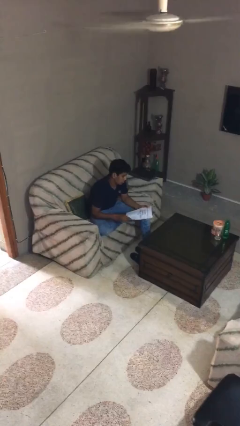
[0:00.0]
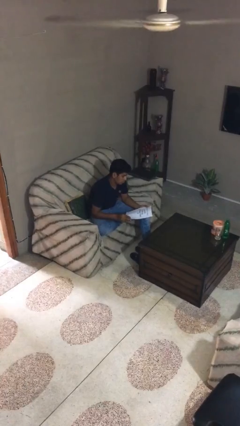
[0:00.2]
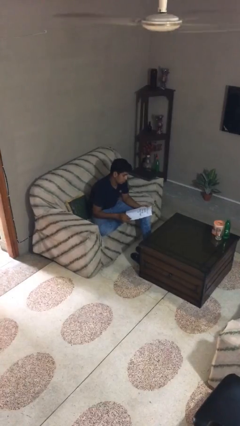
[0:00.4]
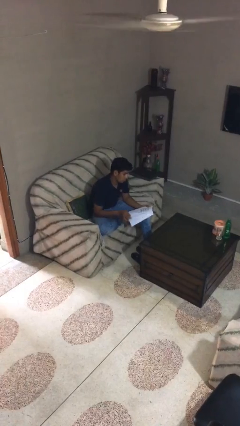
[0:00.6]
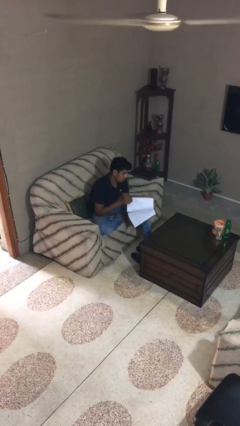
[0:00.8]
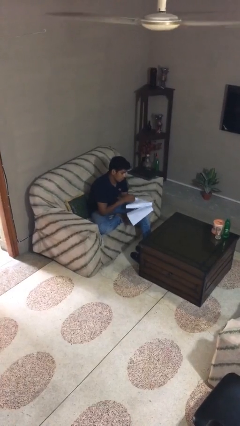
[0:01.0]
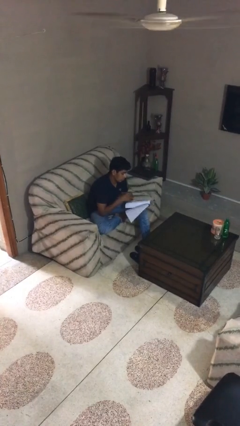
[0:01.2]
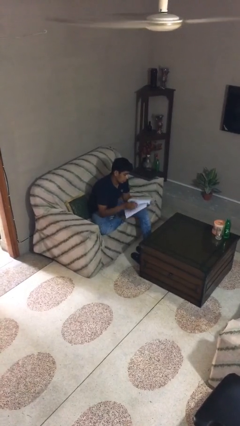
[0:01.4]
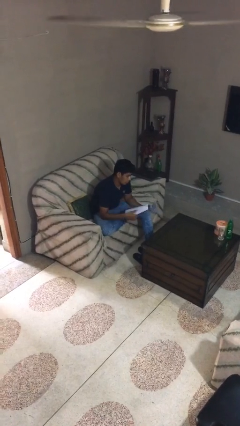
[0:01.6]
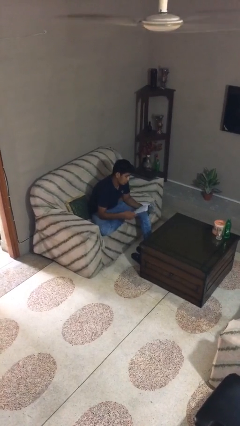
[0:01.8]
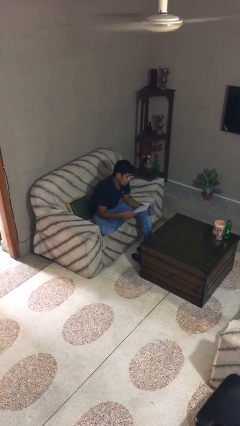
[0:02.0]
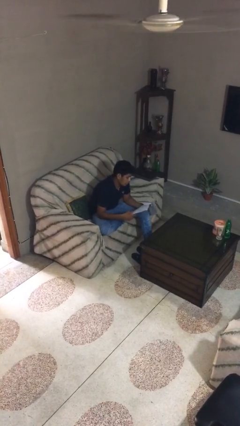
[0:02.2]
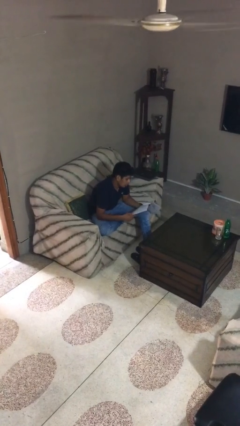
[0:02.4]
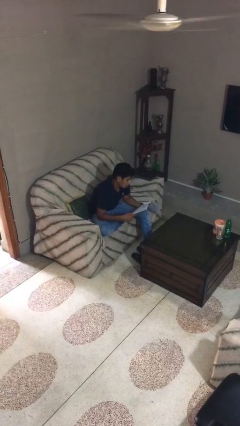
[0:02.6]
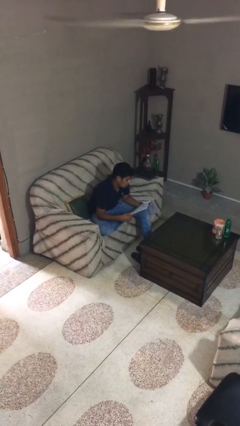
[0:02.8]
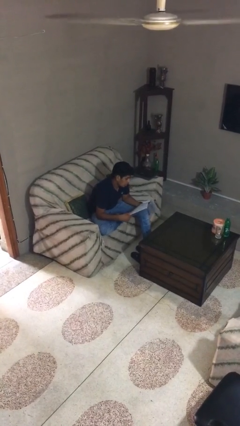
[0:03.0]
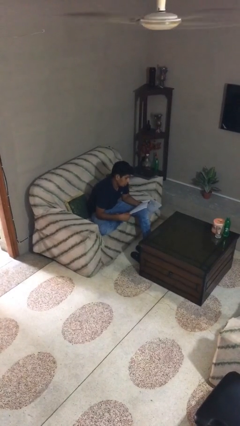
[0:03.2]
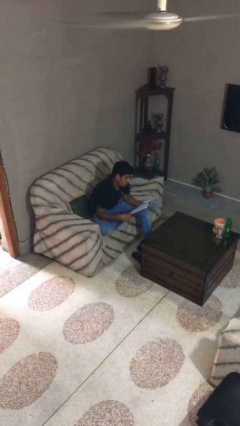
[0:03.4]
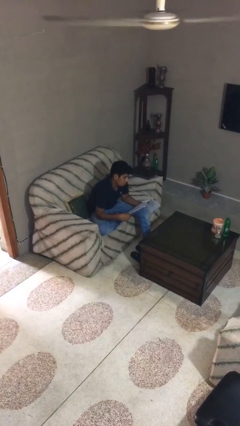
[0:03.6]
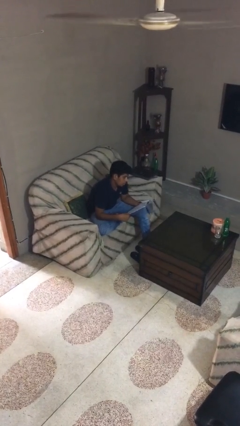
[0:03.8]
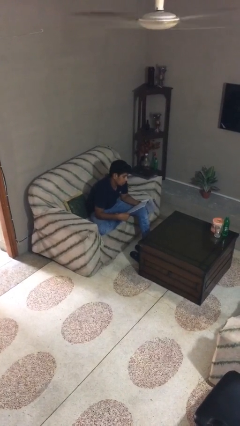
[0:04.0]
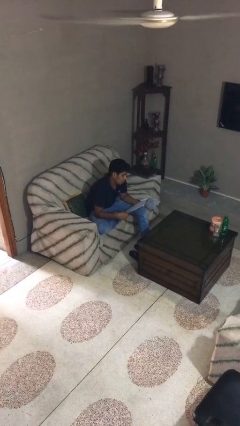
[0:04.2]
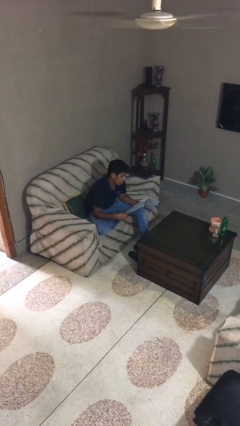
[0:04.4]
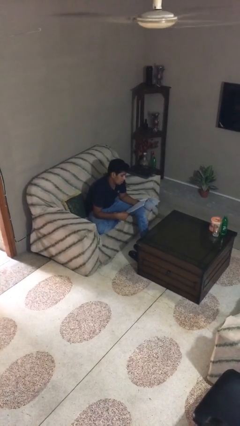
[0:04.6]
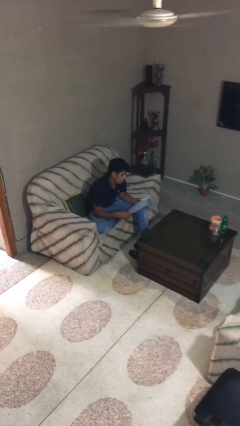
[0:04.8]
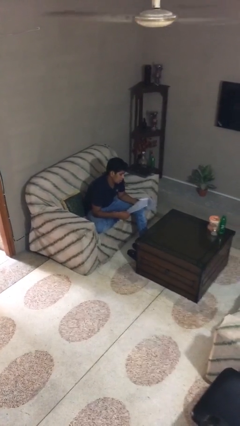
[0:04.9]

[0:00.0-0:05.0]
person reads document

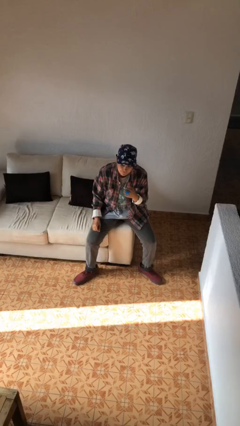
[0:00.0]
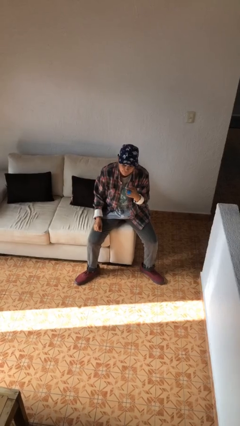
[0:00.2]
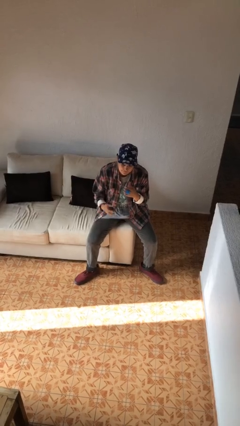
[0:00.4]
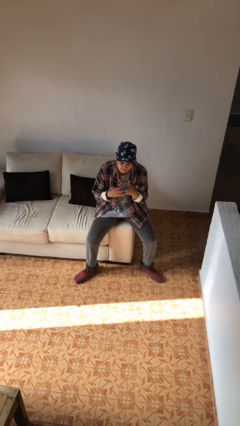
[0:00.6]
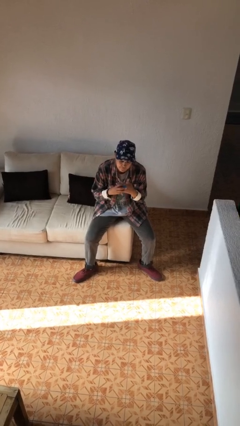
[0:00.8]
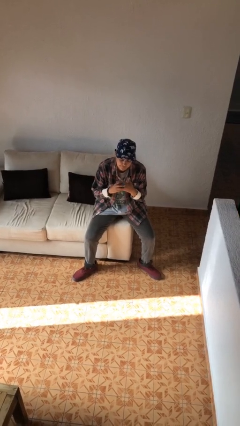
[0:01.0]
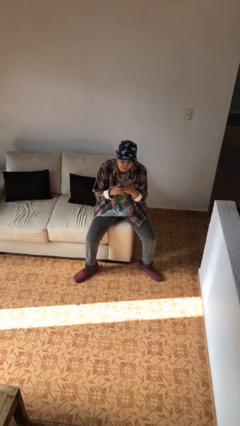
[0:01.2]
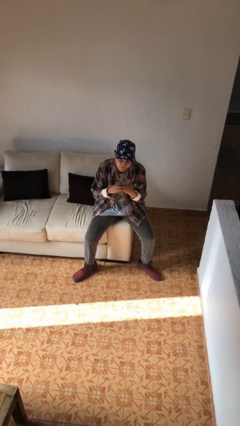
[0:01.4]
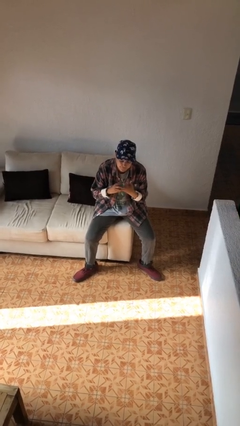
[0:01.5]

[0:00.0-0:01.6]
person takes off ring

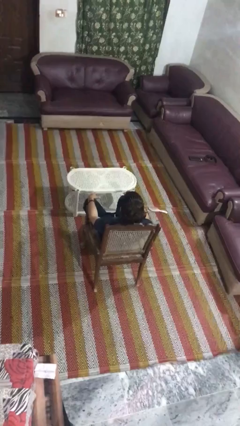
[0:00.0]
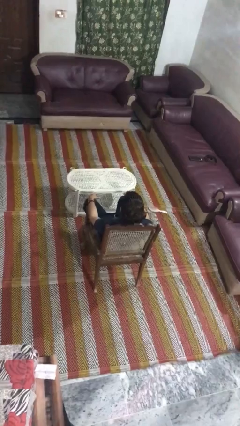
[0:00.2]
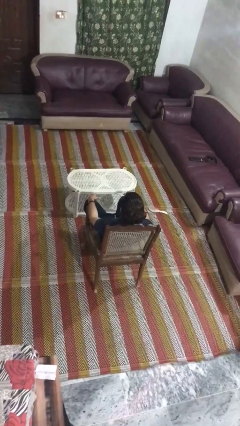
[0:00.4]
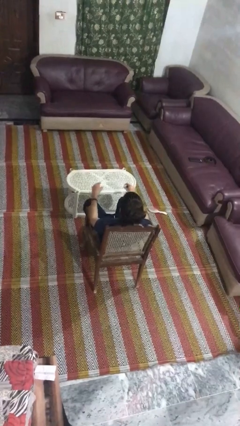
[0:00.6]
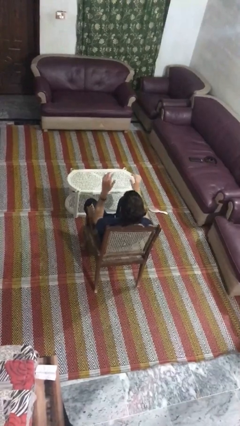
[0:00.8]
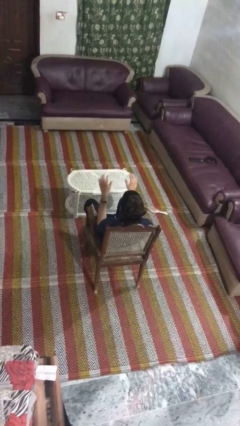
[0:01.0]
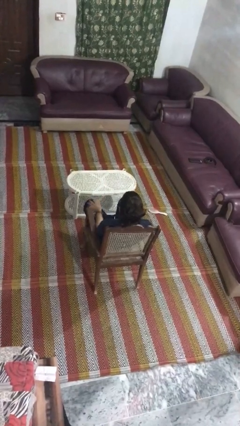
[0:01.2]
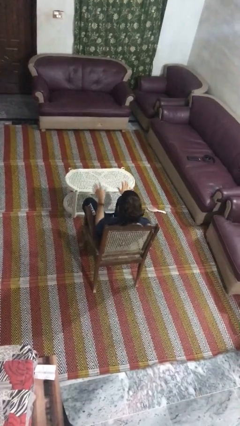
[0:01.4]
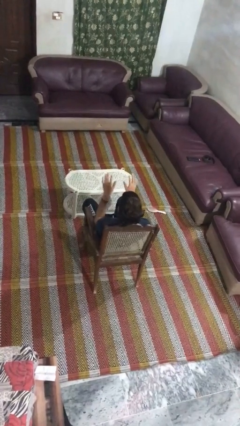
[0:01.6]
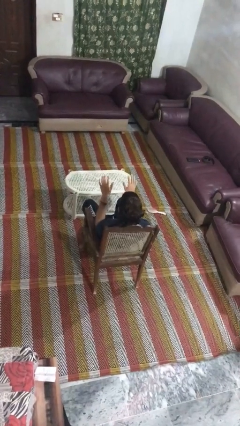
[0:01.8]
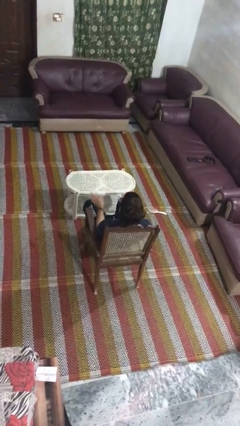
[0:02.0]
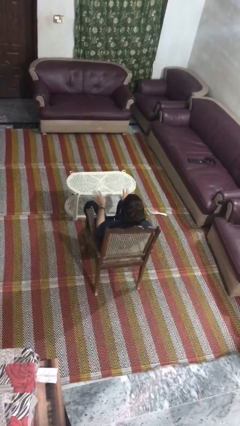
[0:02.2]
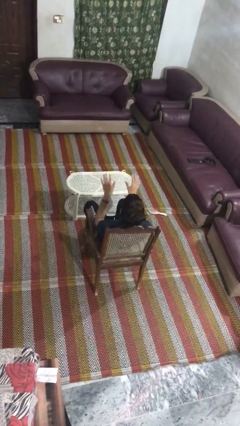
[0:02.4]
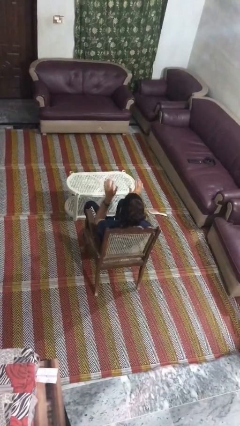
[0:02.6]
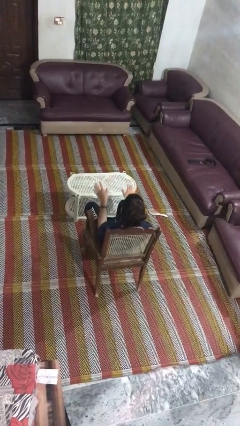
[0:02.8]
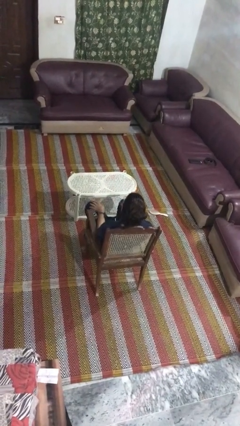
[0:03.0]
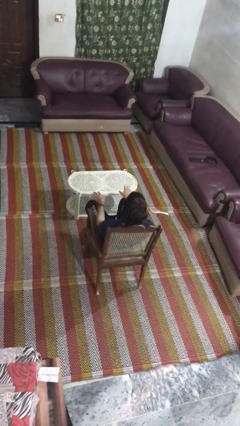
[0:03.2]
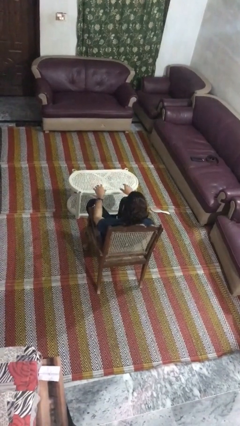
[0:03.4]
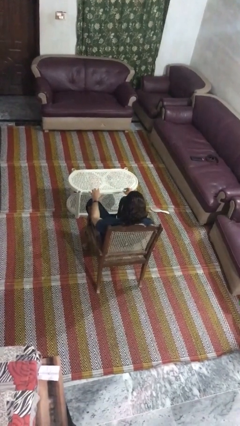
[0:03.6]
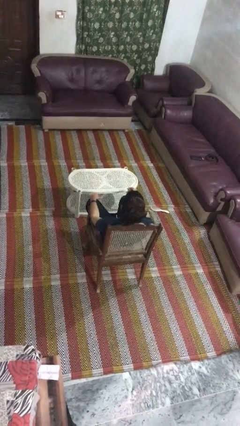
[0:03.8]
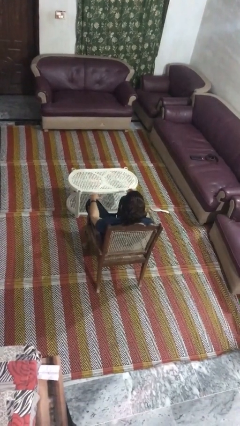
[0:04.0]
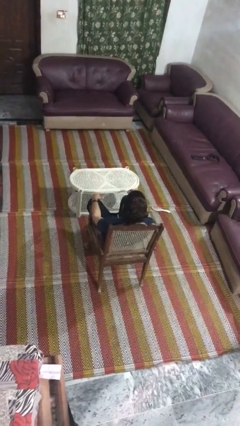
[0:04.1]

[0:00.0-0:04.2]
person slaps hands on thighs

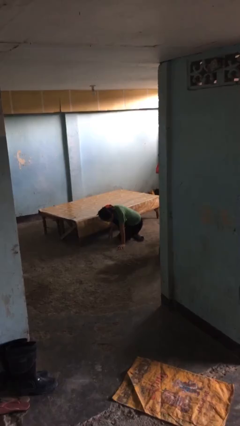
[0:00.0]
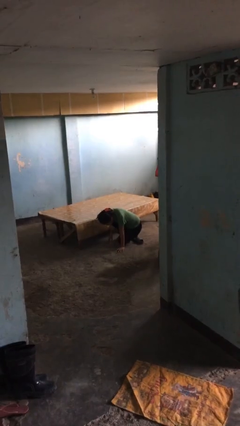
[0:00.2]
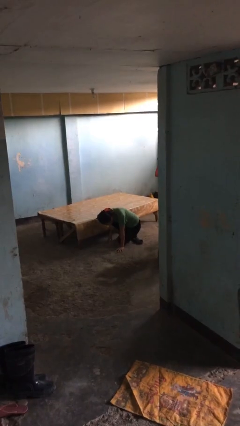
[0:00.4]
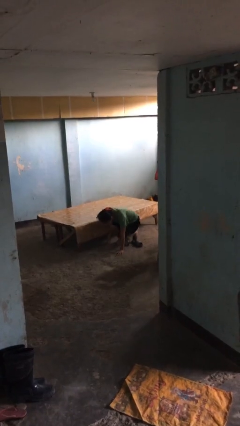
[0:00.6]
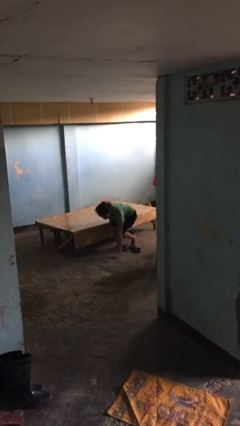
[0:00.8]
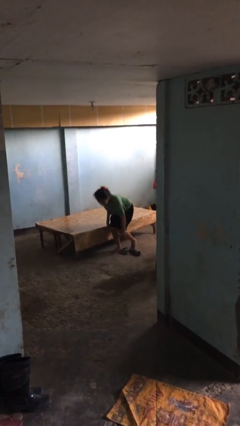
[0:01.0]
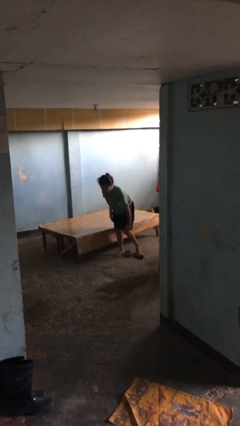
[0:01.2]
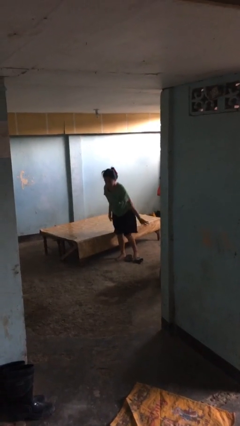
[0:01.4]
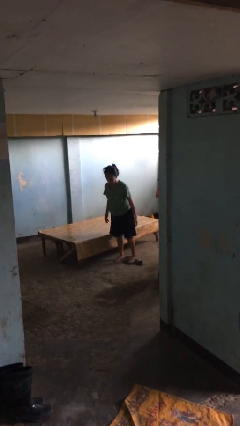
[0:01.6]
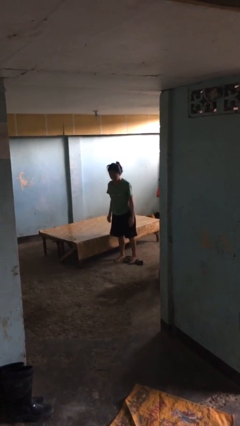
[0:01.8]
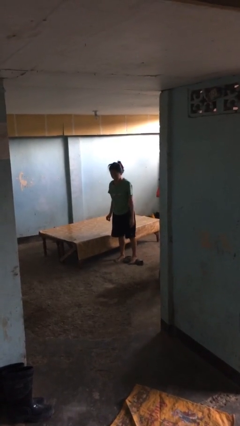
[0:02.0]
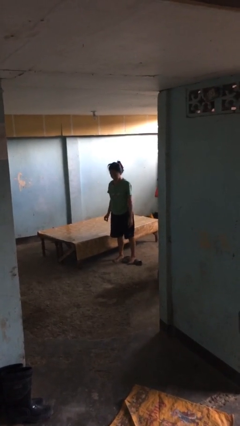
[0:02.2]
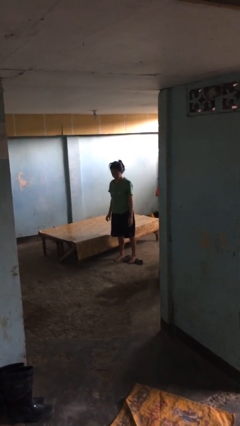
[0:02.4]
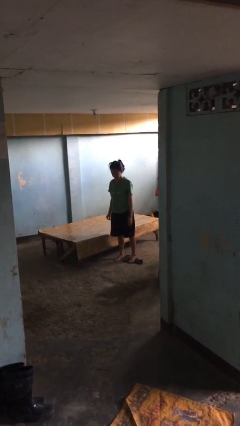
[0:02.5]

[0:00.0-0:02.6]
person stands up from floor

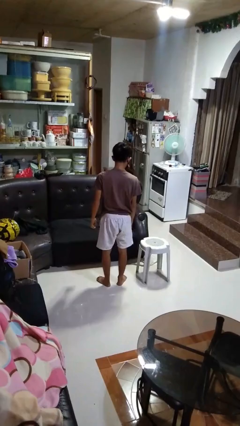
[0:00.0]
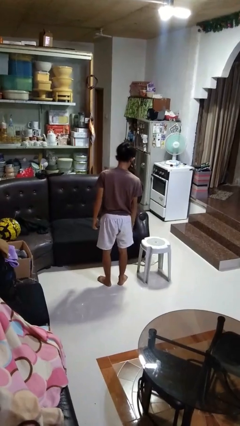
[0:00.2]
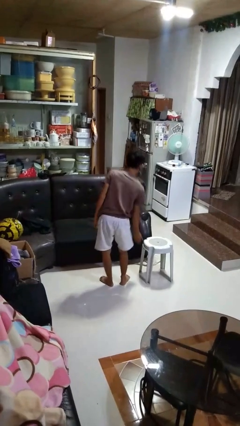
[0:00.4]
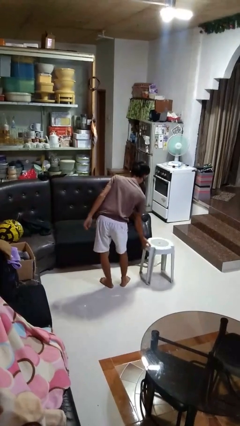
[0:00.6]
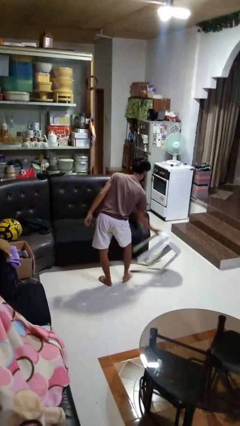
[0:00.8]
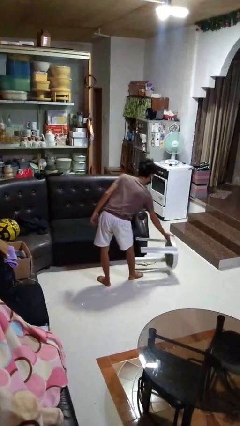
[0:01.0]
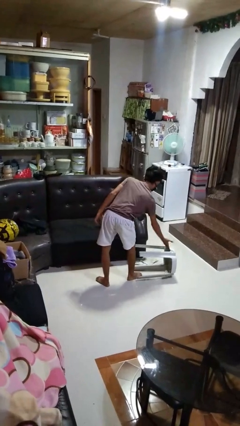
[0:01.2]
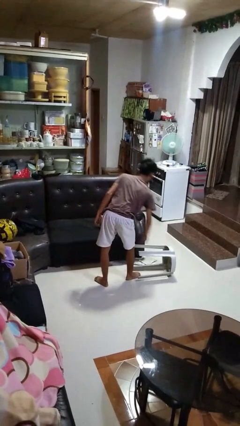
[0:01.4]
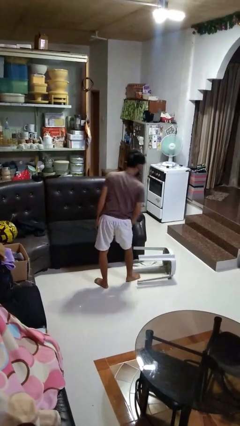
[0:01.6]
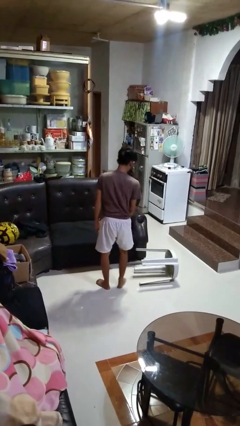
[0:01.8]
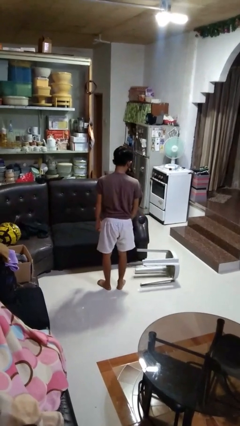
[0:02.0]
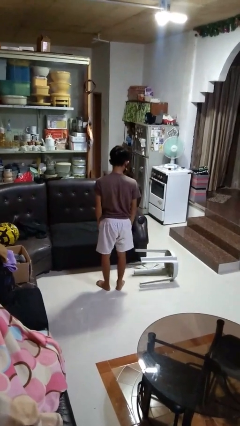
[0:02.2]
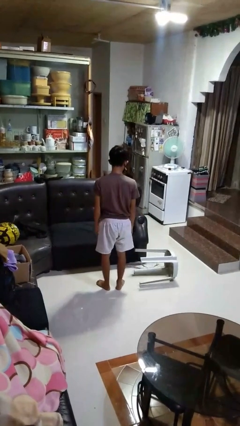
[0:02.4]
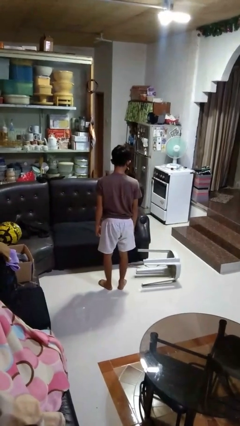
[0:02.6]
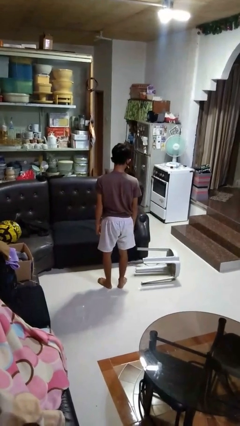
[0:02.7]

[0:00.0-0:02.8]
person knocks over furniture

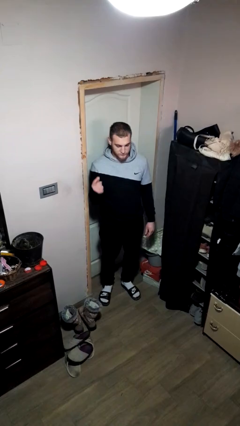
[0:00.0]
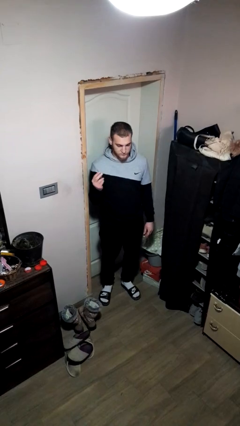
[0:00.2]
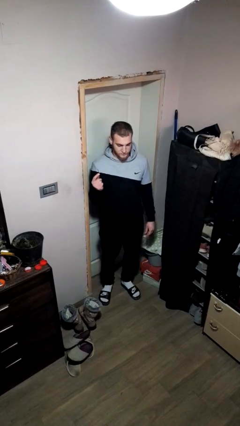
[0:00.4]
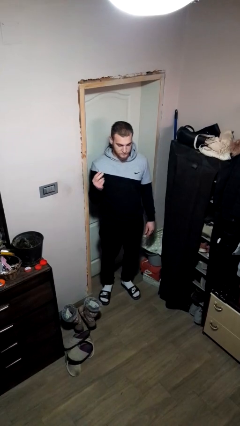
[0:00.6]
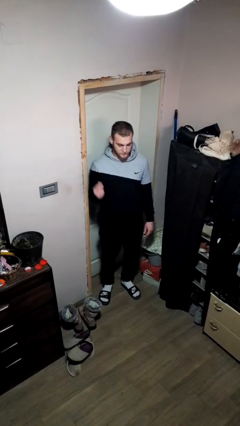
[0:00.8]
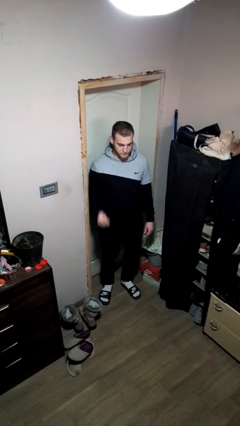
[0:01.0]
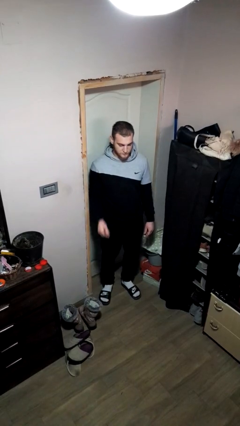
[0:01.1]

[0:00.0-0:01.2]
person snaps fingers
